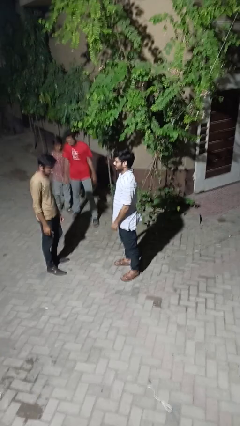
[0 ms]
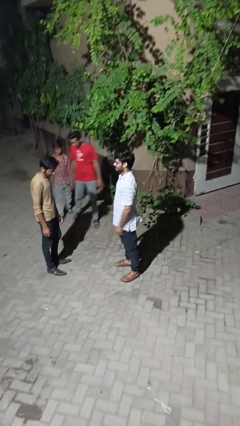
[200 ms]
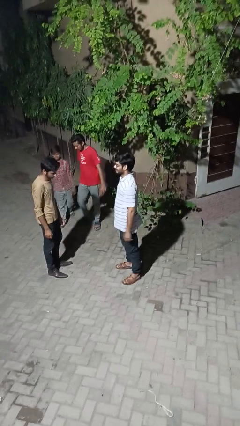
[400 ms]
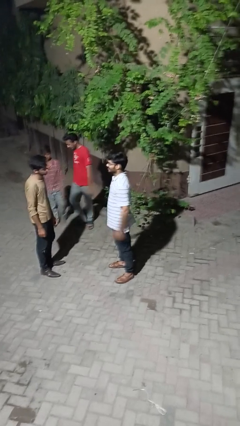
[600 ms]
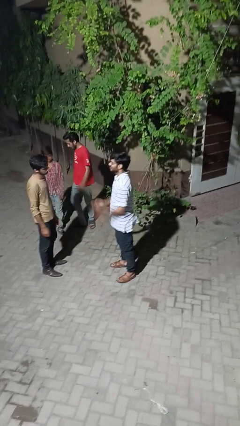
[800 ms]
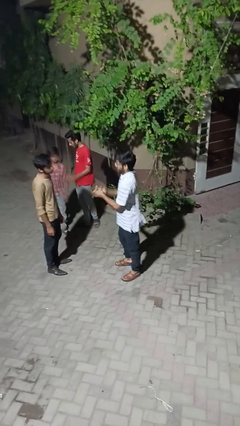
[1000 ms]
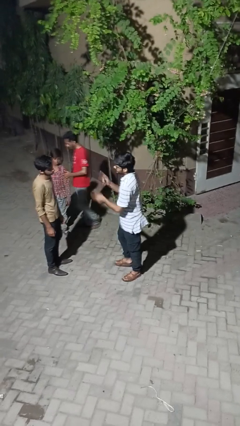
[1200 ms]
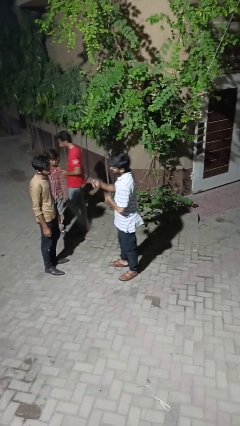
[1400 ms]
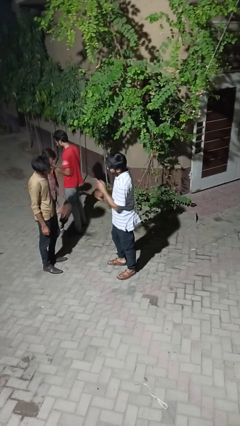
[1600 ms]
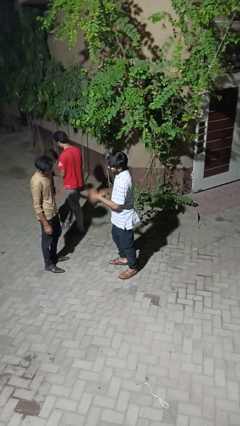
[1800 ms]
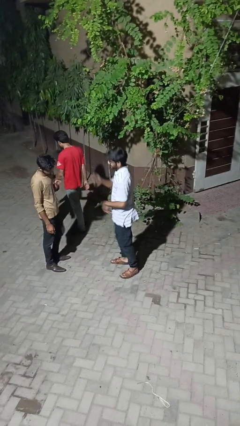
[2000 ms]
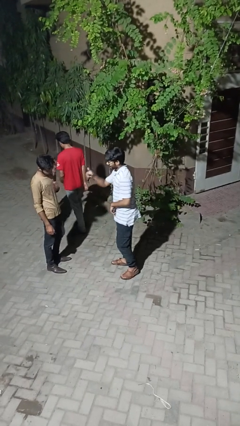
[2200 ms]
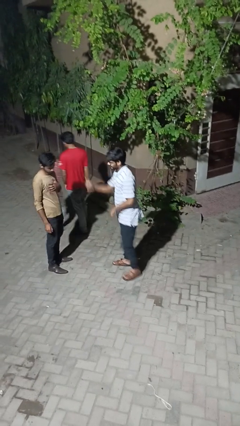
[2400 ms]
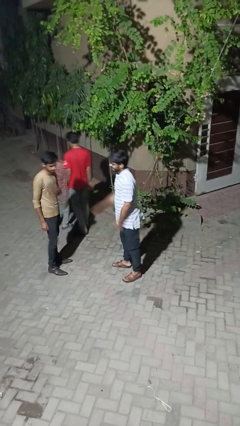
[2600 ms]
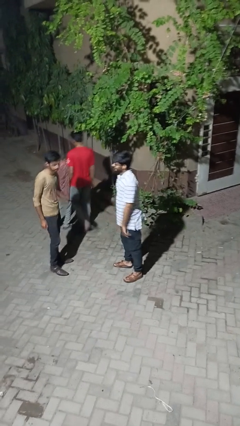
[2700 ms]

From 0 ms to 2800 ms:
person talks to person

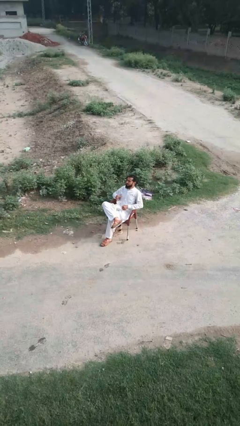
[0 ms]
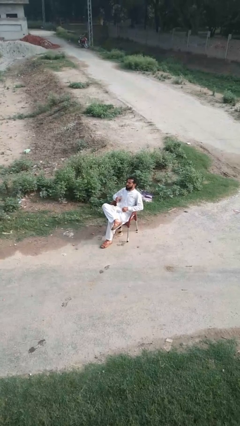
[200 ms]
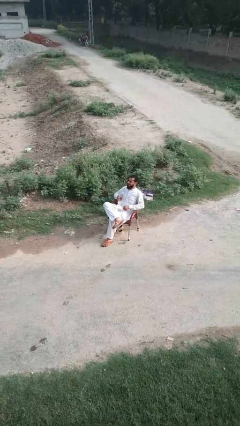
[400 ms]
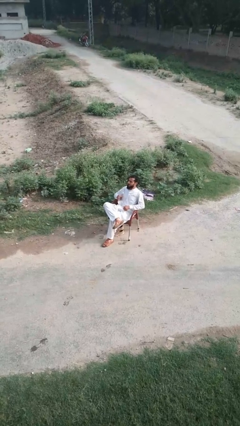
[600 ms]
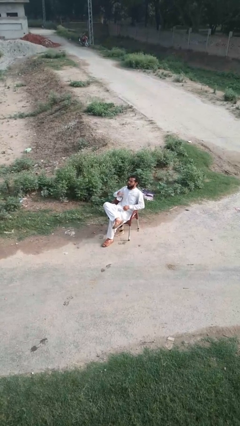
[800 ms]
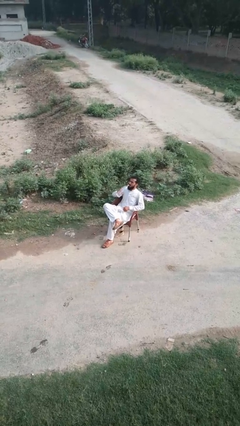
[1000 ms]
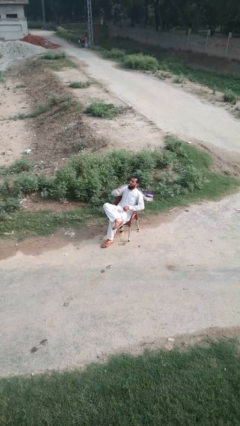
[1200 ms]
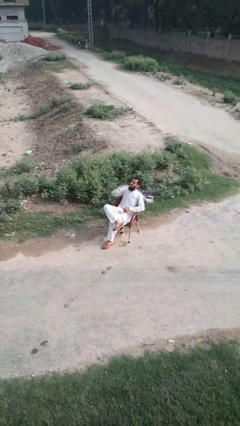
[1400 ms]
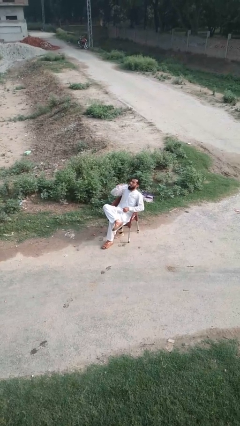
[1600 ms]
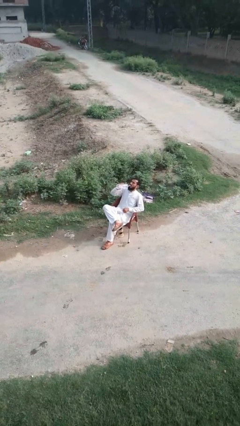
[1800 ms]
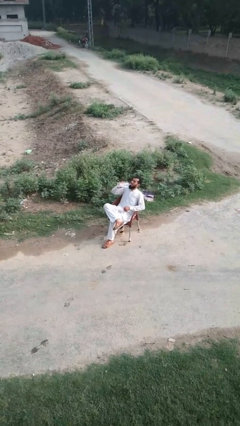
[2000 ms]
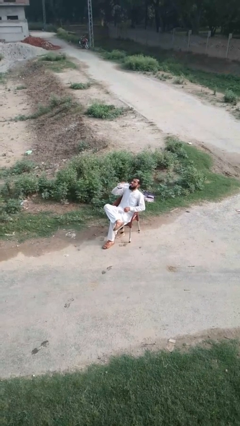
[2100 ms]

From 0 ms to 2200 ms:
person drinks from bottle

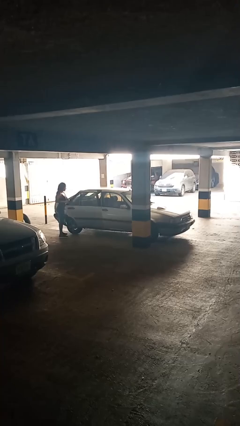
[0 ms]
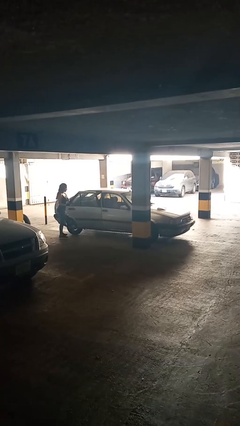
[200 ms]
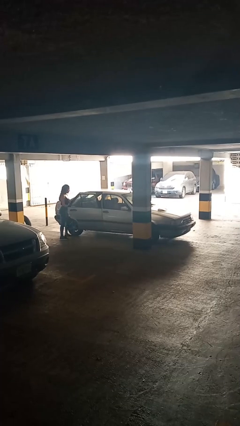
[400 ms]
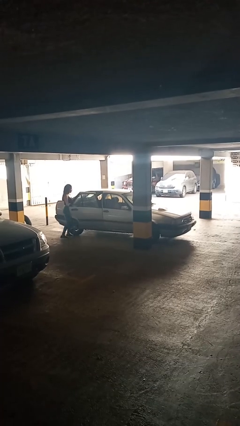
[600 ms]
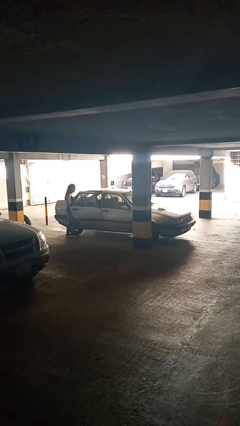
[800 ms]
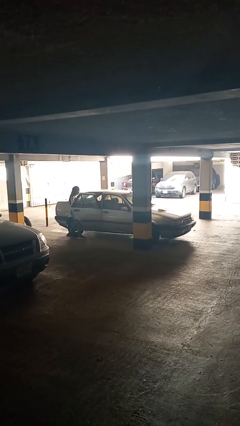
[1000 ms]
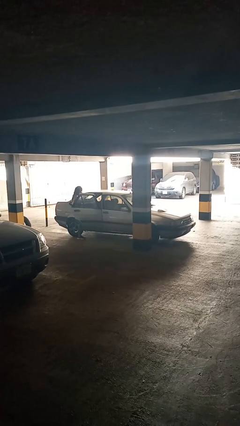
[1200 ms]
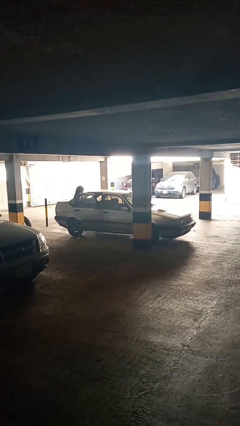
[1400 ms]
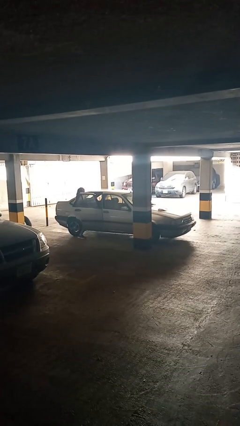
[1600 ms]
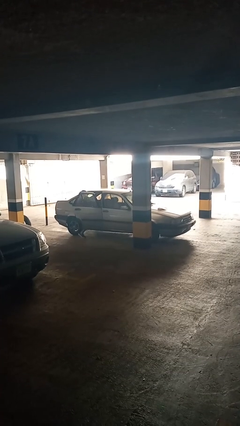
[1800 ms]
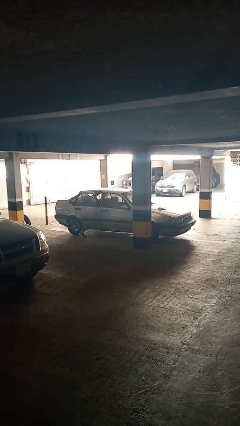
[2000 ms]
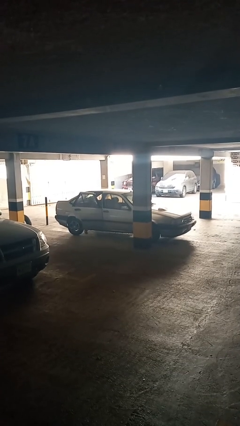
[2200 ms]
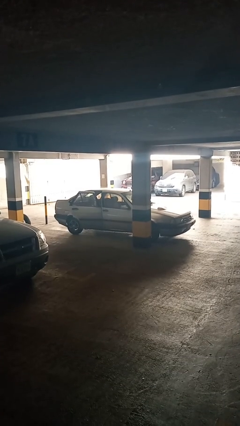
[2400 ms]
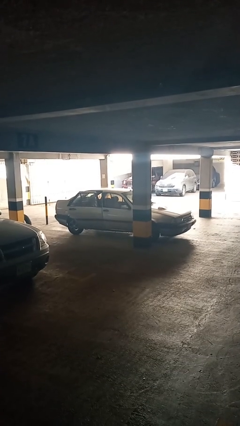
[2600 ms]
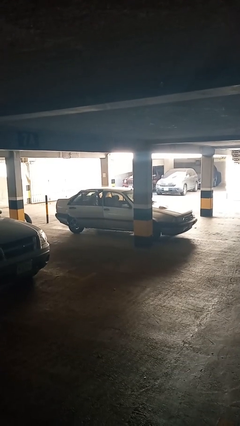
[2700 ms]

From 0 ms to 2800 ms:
car picks up person

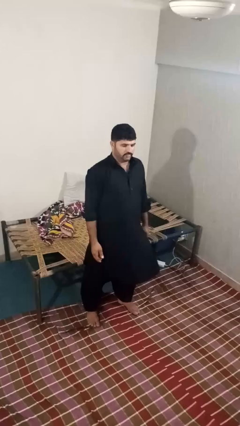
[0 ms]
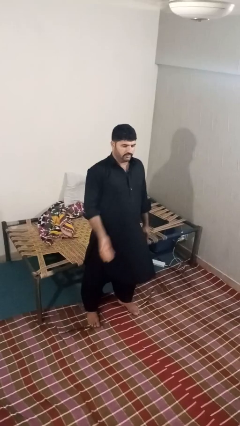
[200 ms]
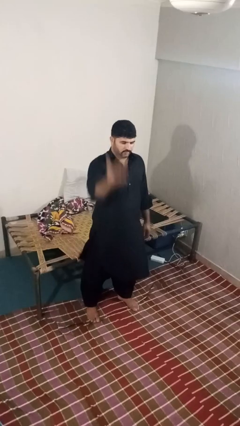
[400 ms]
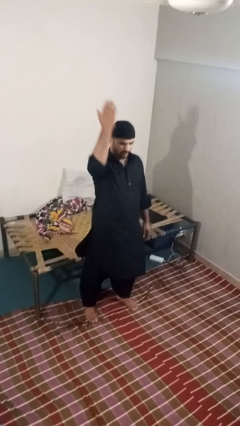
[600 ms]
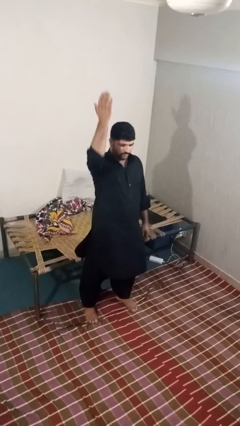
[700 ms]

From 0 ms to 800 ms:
person gestures swipe up

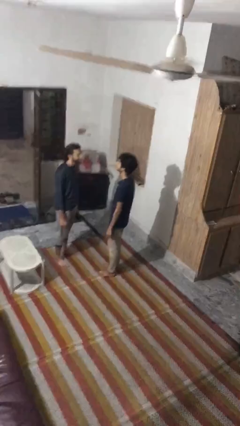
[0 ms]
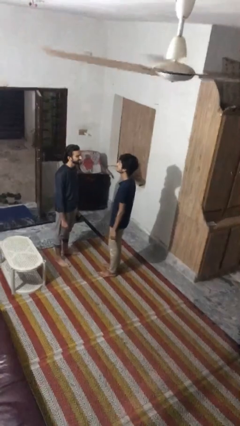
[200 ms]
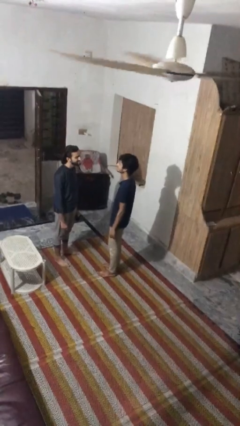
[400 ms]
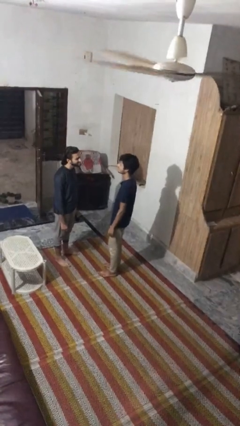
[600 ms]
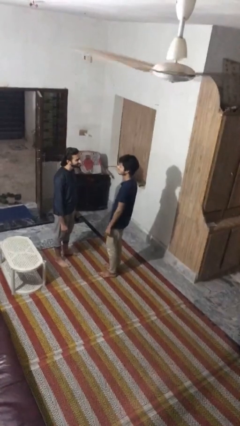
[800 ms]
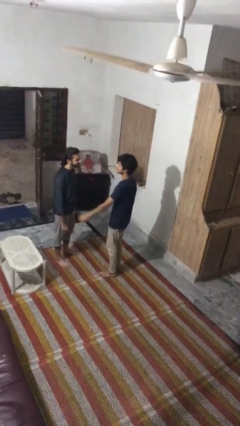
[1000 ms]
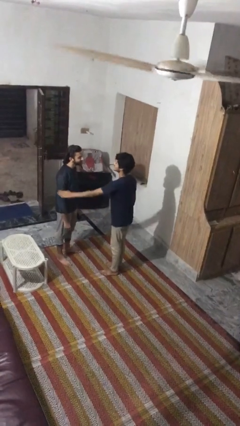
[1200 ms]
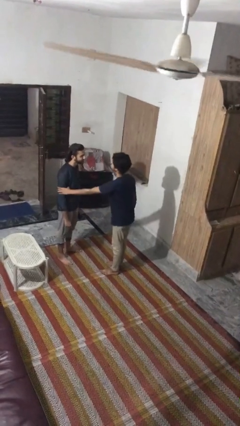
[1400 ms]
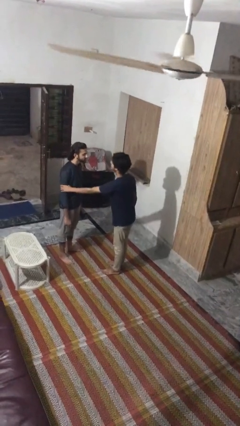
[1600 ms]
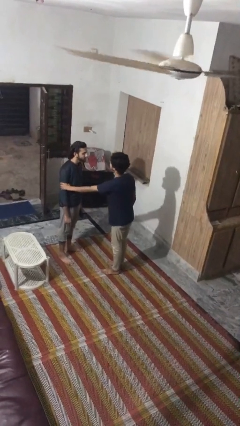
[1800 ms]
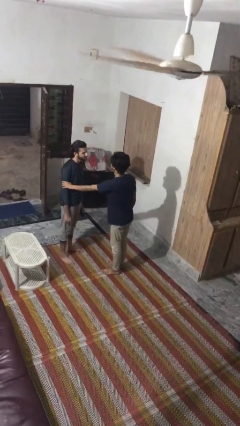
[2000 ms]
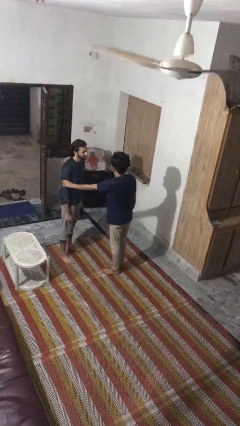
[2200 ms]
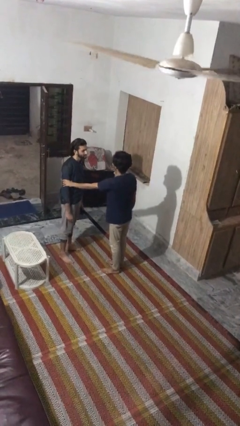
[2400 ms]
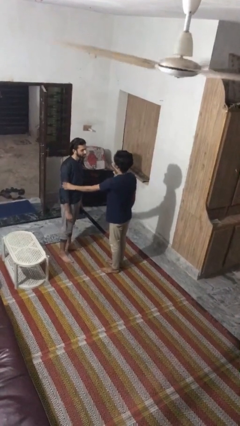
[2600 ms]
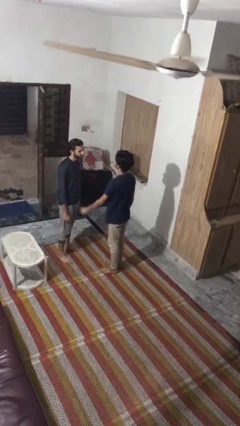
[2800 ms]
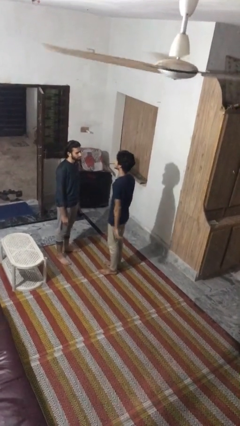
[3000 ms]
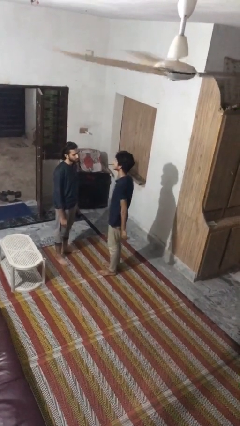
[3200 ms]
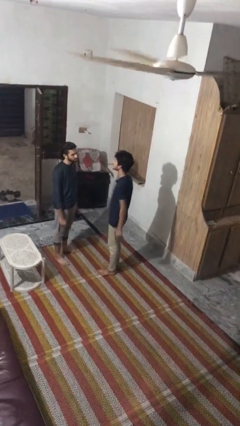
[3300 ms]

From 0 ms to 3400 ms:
person grabs person by bicep

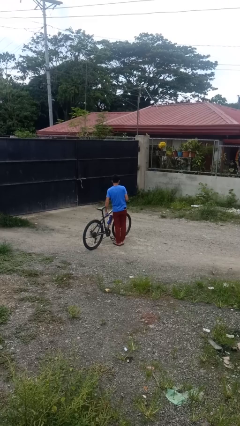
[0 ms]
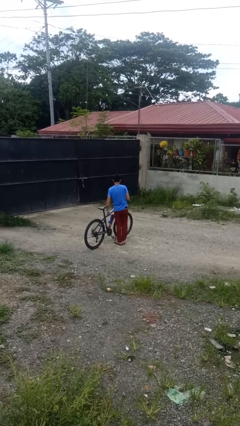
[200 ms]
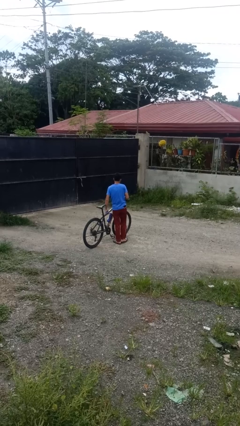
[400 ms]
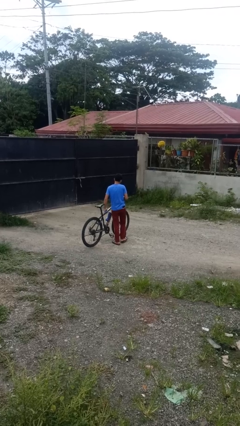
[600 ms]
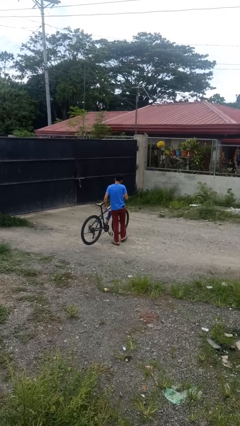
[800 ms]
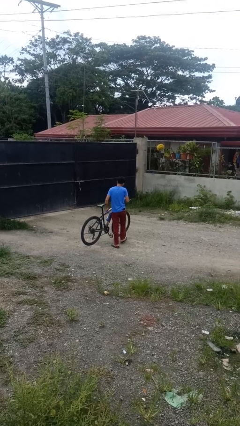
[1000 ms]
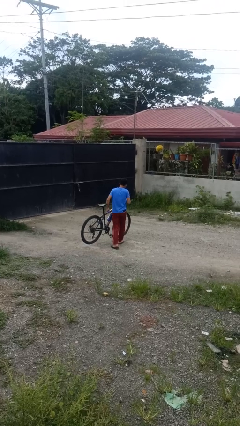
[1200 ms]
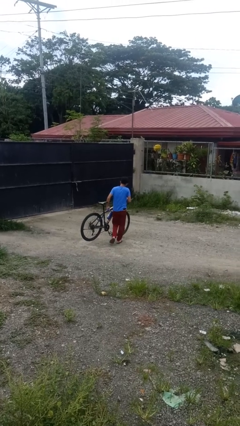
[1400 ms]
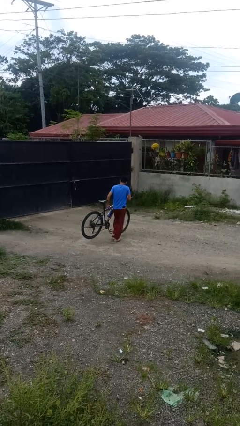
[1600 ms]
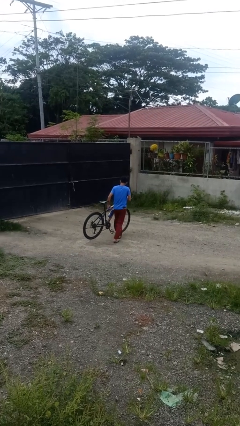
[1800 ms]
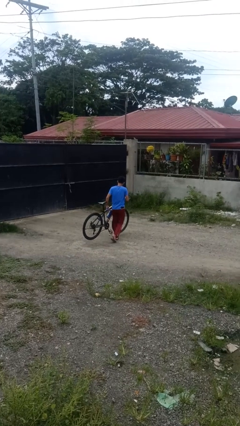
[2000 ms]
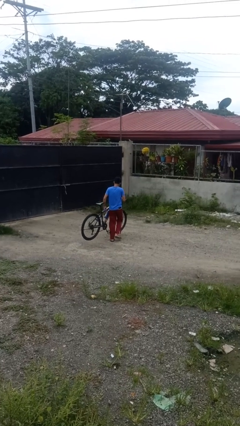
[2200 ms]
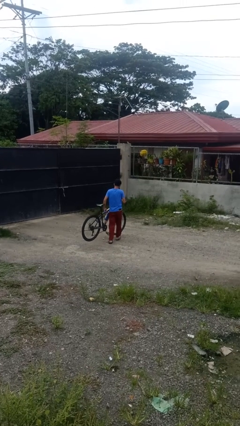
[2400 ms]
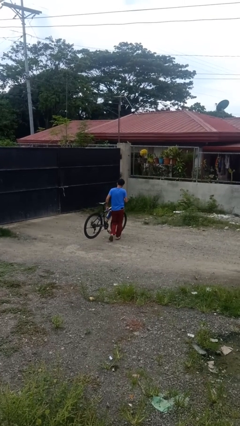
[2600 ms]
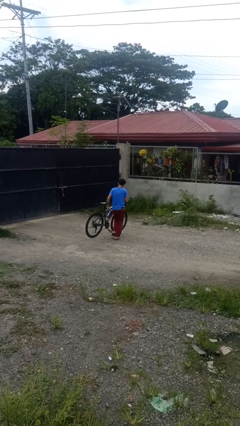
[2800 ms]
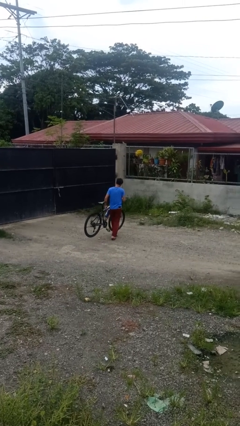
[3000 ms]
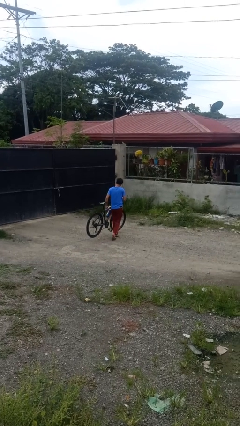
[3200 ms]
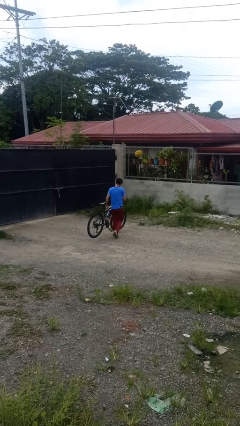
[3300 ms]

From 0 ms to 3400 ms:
person carries bicycle

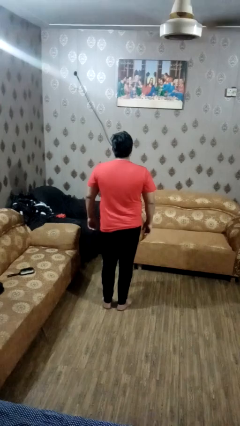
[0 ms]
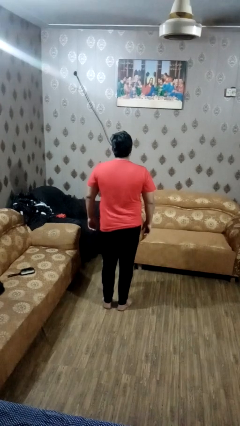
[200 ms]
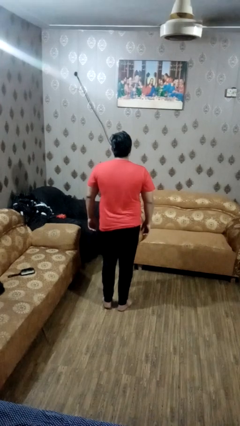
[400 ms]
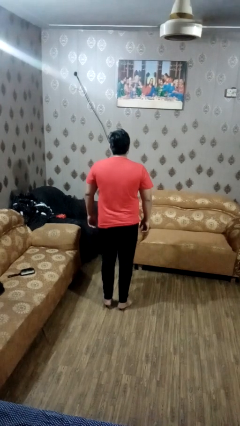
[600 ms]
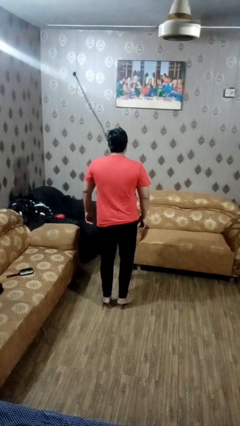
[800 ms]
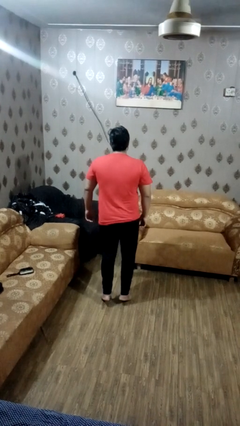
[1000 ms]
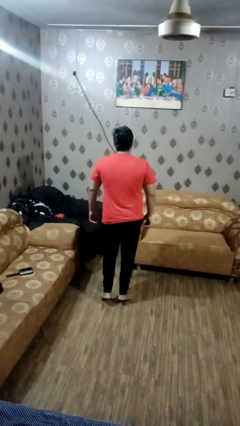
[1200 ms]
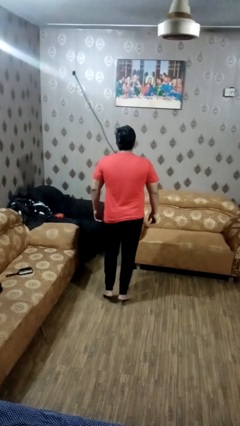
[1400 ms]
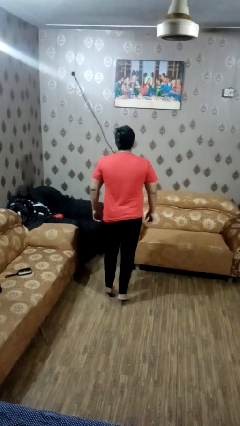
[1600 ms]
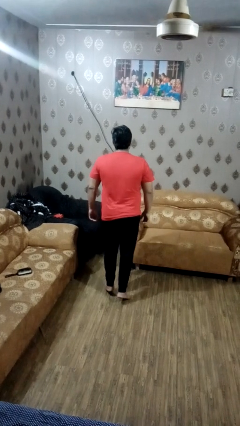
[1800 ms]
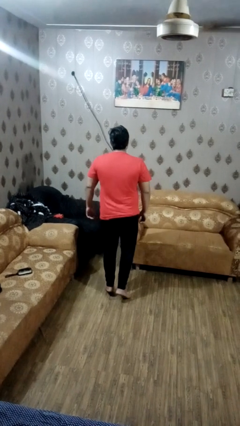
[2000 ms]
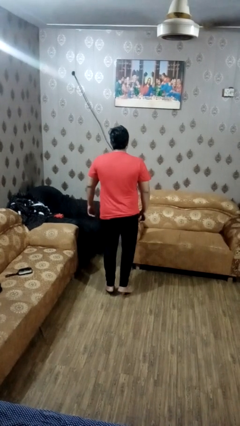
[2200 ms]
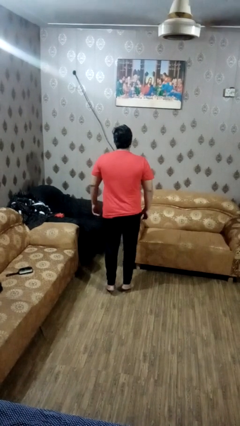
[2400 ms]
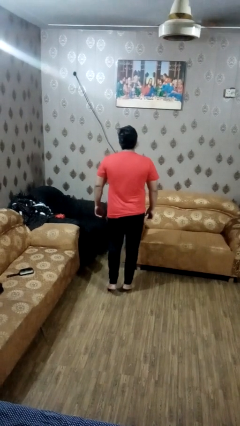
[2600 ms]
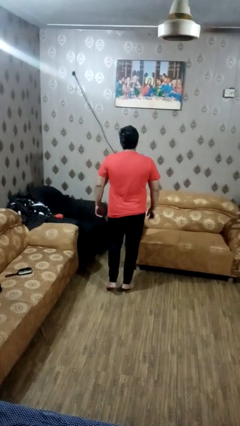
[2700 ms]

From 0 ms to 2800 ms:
person walks tiptoe
